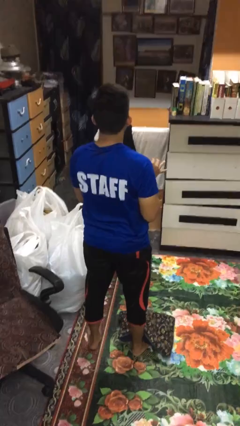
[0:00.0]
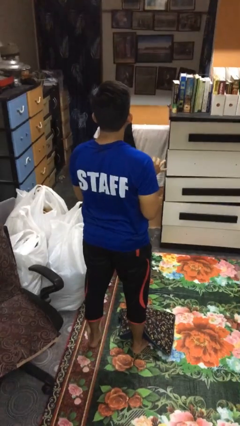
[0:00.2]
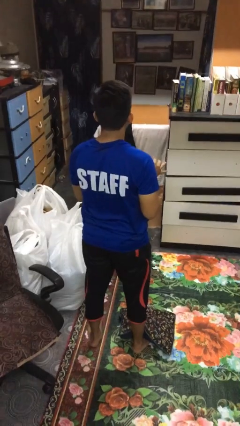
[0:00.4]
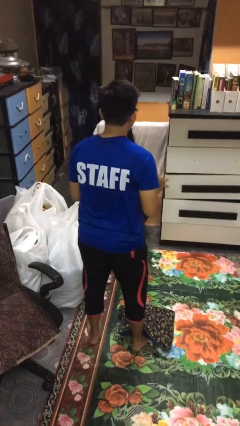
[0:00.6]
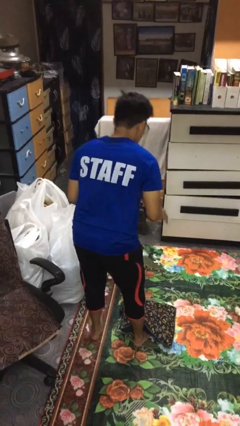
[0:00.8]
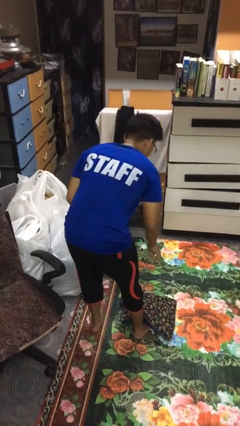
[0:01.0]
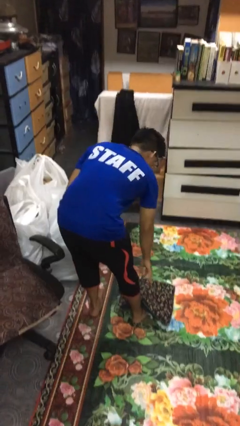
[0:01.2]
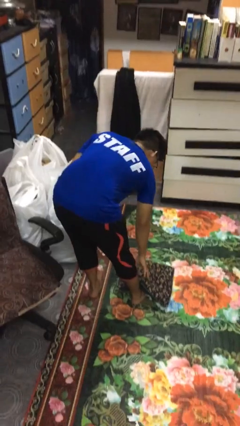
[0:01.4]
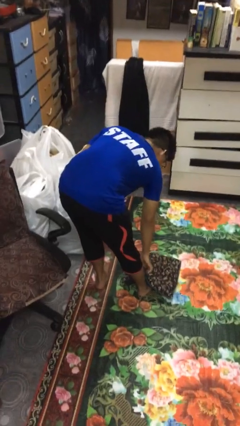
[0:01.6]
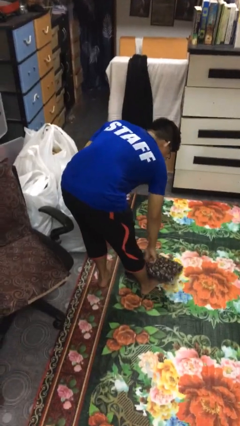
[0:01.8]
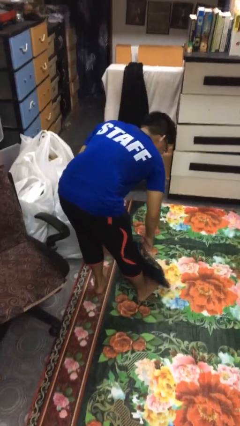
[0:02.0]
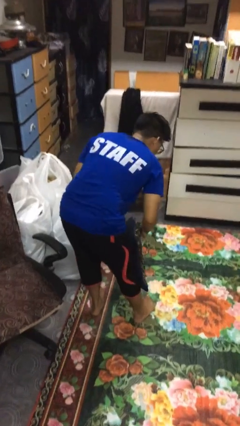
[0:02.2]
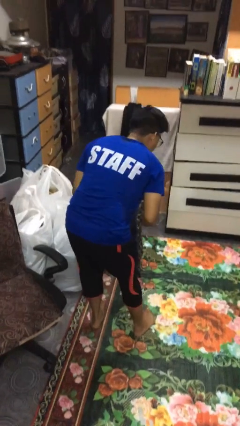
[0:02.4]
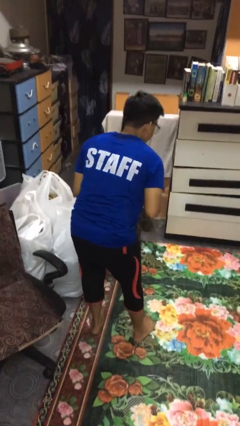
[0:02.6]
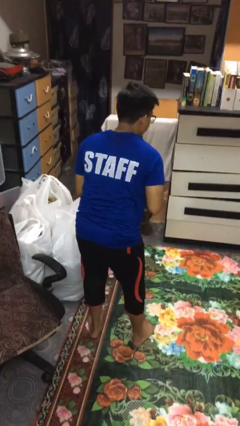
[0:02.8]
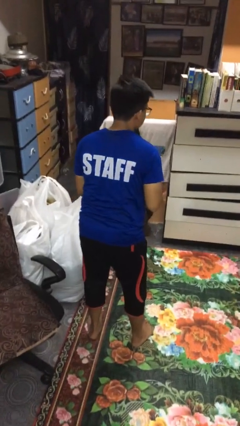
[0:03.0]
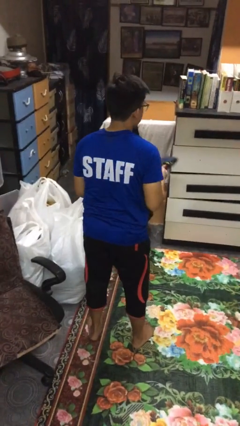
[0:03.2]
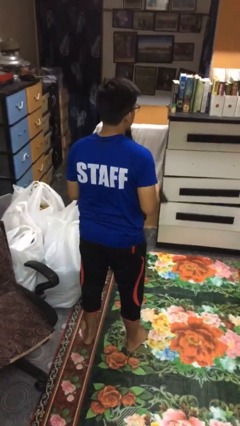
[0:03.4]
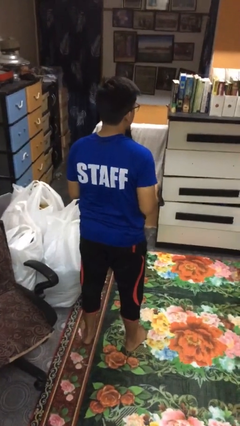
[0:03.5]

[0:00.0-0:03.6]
person picks up object from floor

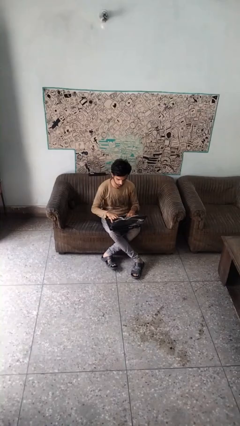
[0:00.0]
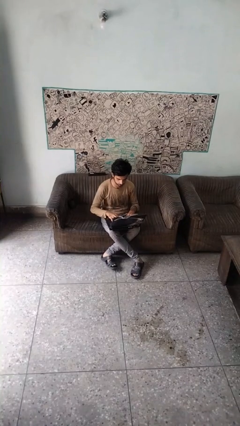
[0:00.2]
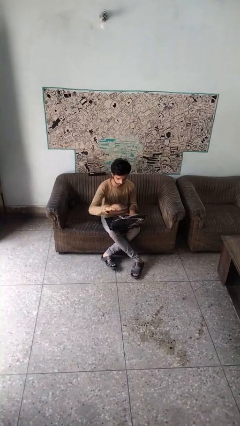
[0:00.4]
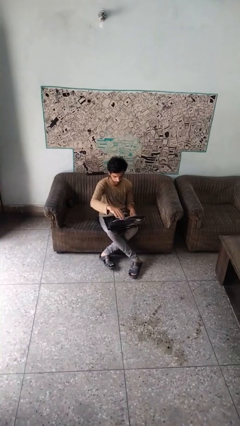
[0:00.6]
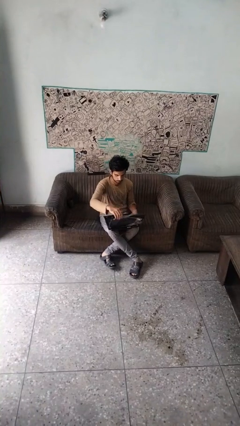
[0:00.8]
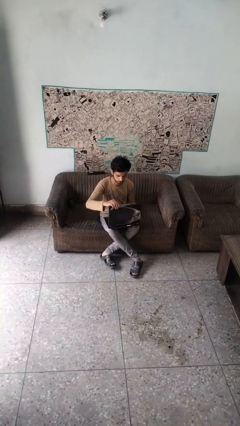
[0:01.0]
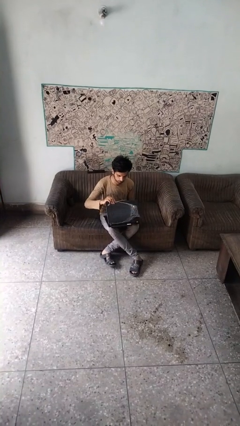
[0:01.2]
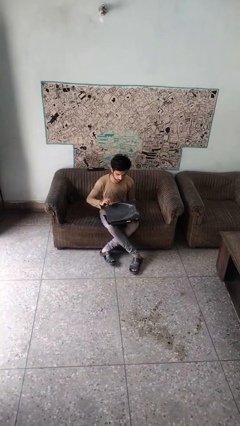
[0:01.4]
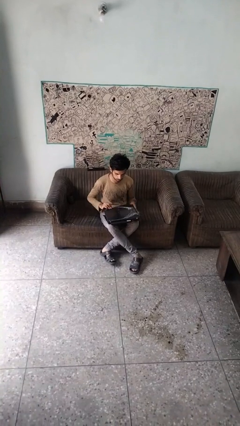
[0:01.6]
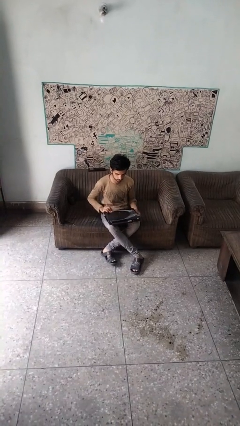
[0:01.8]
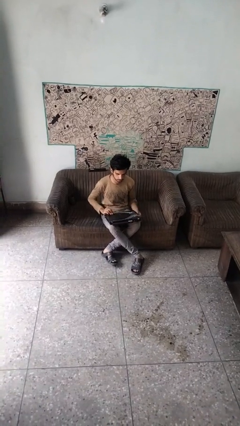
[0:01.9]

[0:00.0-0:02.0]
person closes laptop

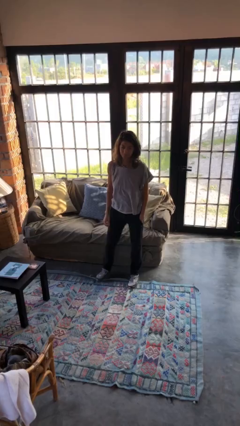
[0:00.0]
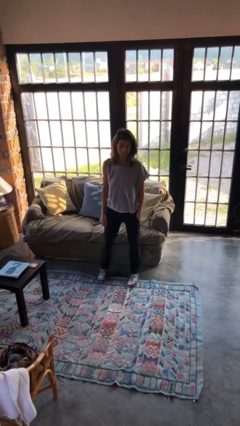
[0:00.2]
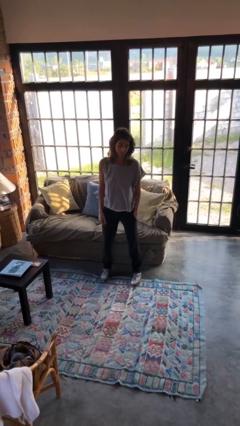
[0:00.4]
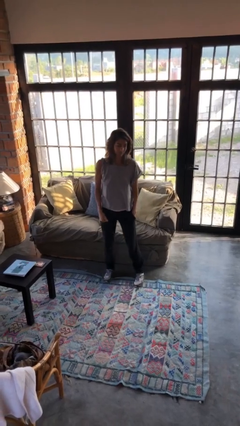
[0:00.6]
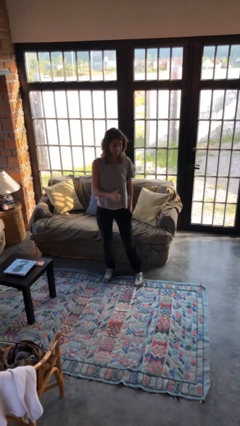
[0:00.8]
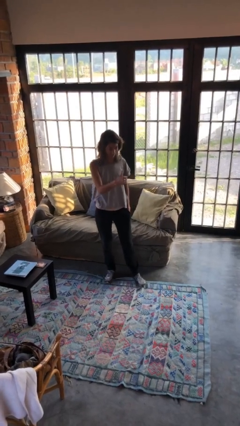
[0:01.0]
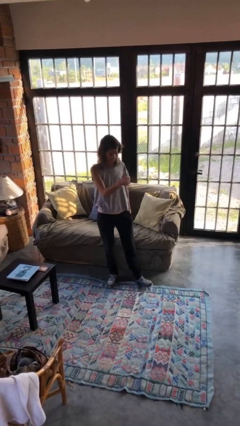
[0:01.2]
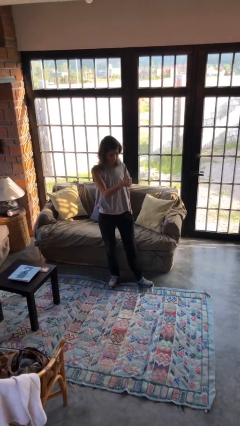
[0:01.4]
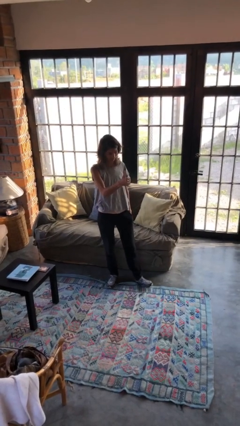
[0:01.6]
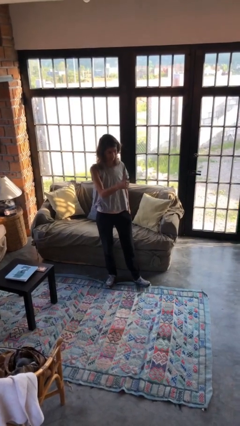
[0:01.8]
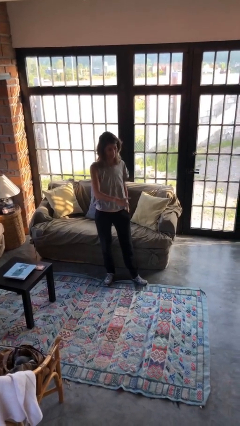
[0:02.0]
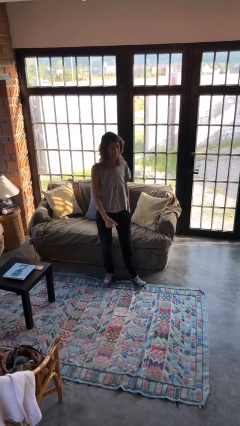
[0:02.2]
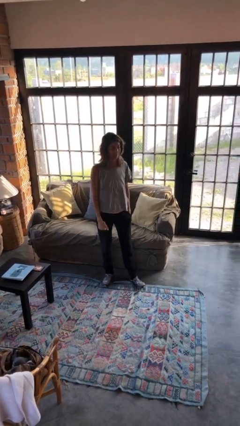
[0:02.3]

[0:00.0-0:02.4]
person gestures thumbs up

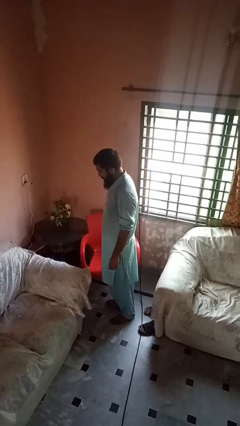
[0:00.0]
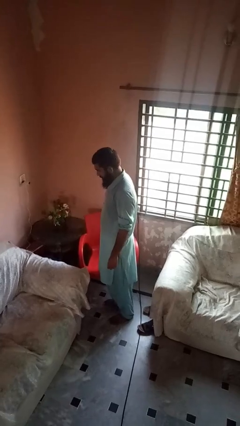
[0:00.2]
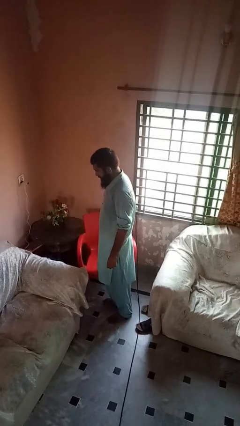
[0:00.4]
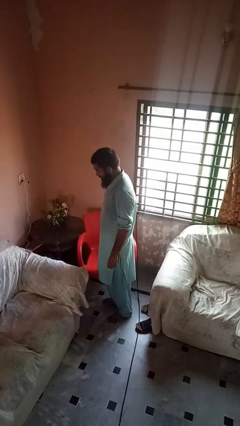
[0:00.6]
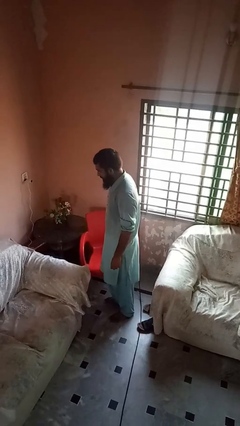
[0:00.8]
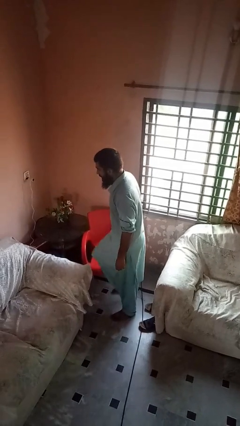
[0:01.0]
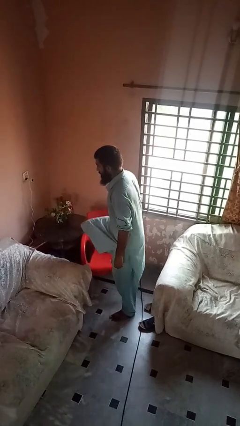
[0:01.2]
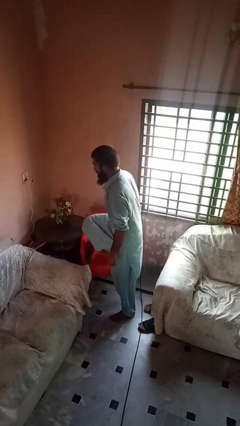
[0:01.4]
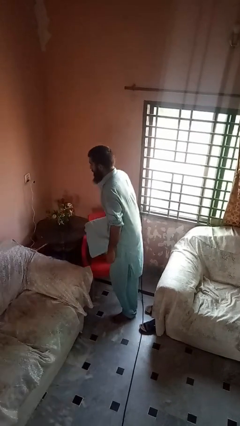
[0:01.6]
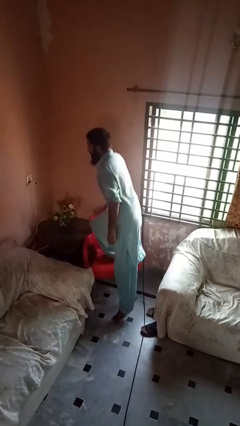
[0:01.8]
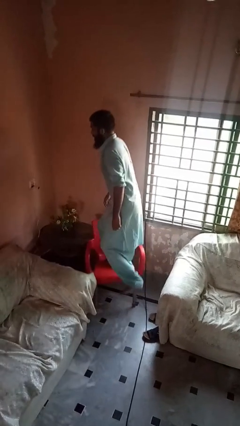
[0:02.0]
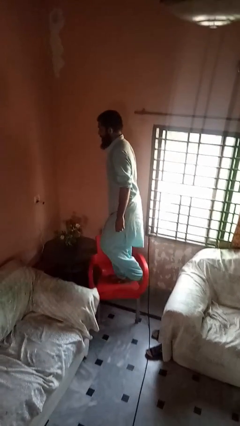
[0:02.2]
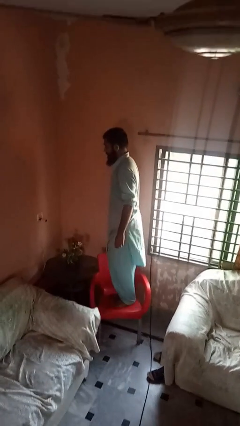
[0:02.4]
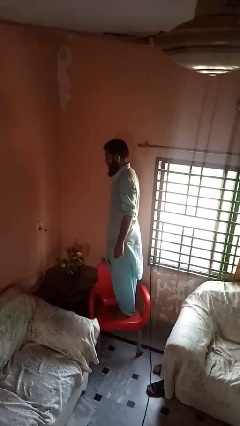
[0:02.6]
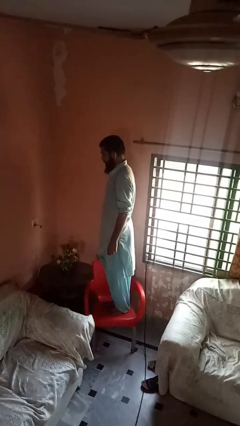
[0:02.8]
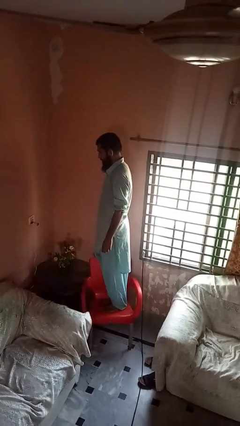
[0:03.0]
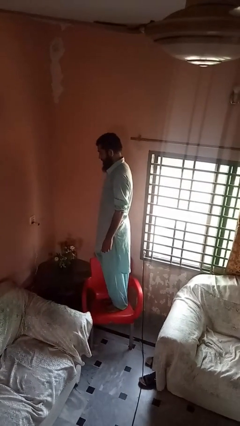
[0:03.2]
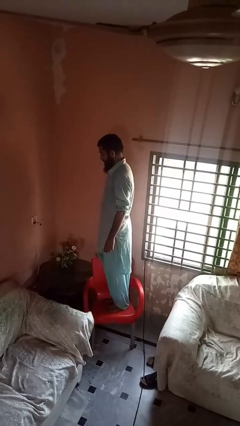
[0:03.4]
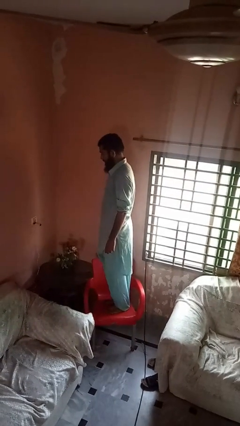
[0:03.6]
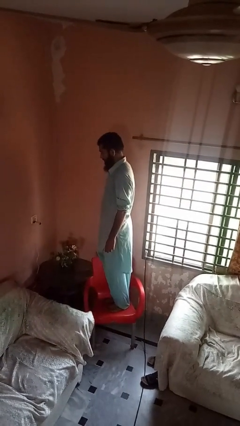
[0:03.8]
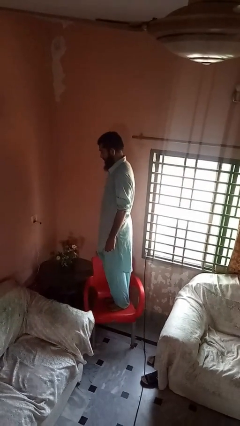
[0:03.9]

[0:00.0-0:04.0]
person climbs on chair

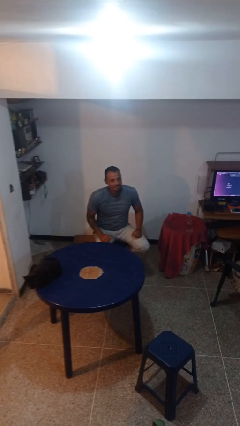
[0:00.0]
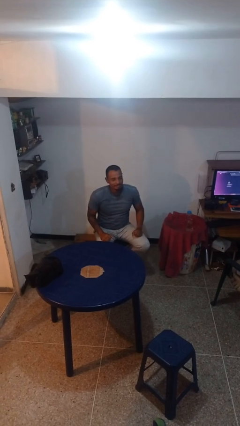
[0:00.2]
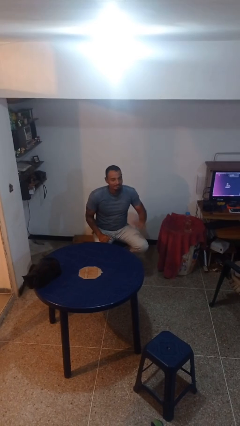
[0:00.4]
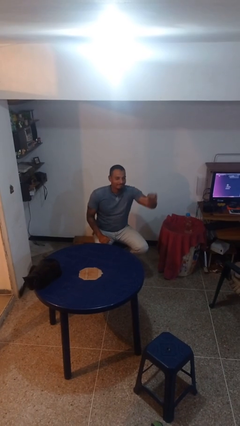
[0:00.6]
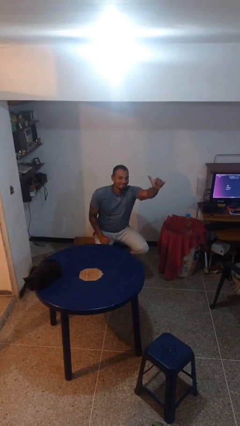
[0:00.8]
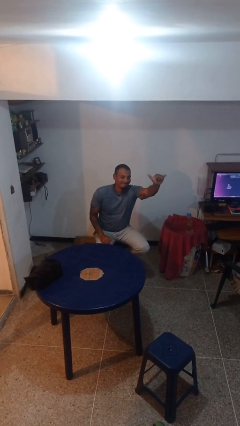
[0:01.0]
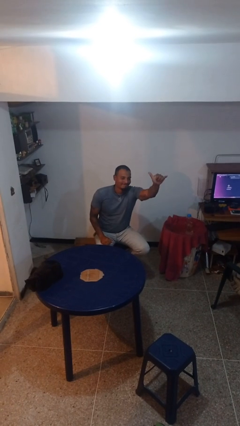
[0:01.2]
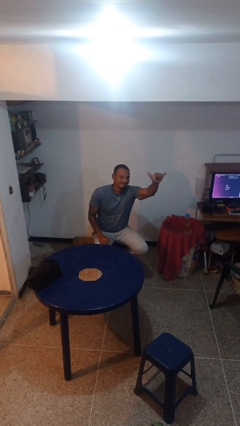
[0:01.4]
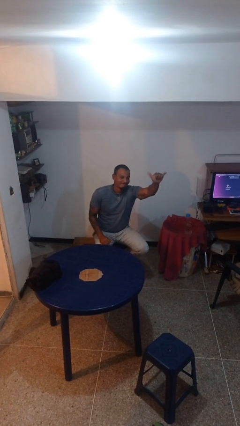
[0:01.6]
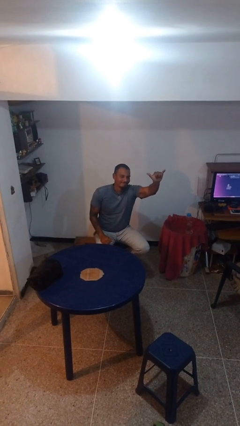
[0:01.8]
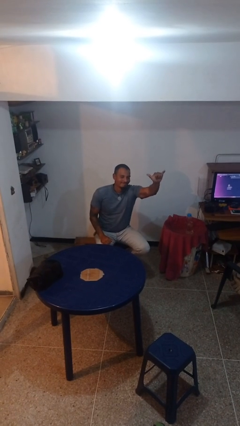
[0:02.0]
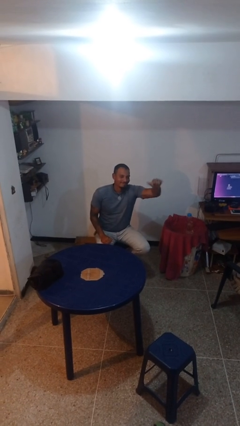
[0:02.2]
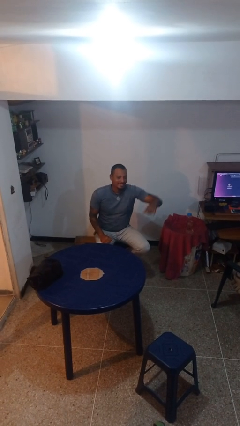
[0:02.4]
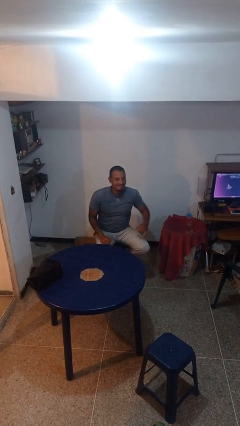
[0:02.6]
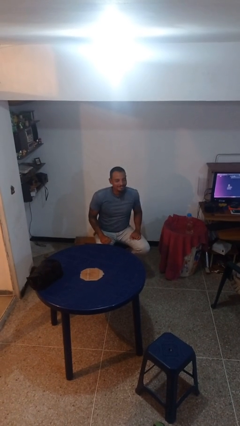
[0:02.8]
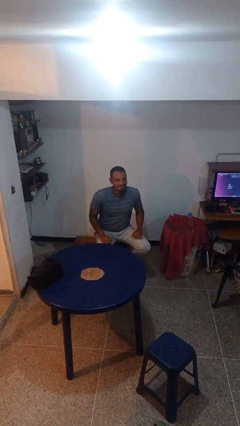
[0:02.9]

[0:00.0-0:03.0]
person gestures hang loose

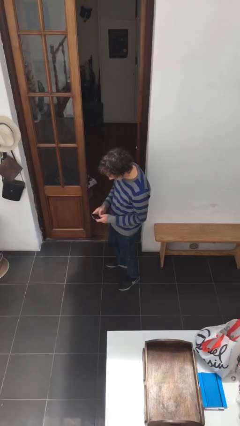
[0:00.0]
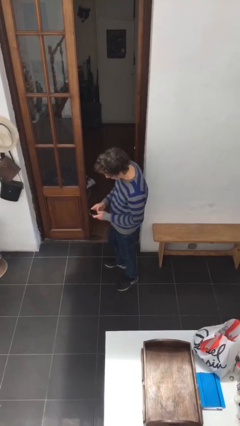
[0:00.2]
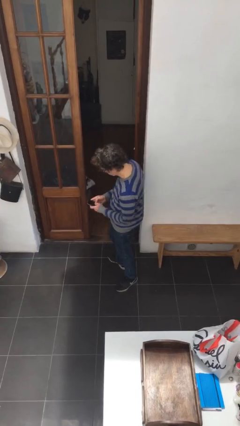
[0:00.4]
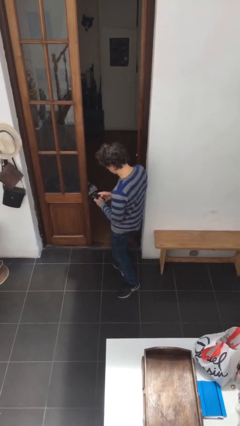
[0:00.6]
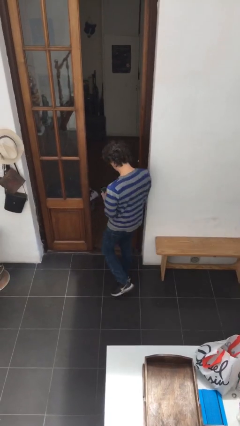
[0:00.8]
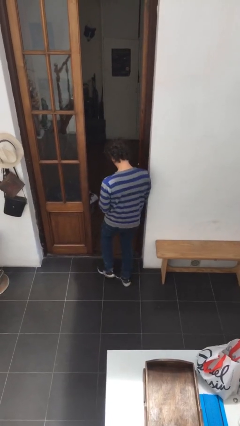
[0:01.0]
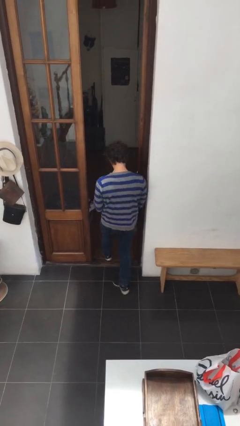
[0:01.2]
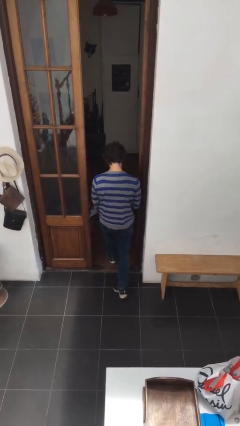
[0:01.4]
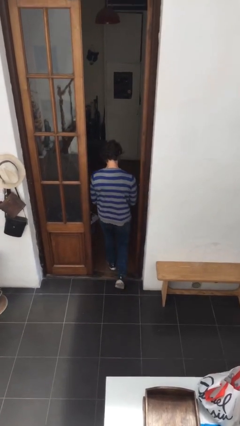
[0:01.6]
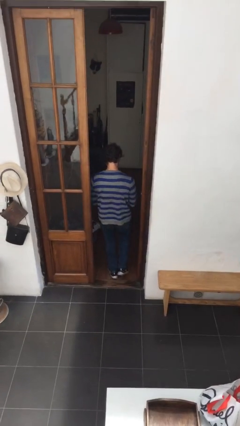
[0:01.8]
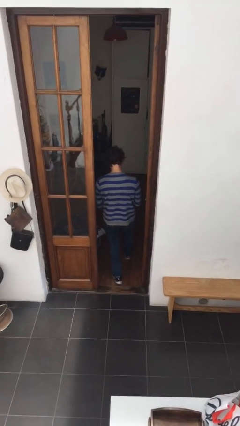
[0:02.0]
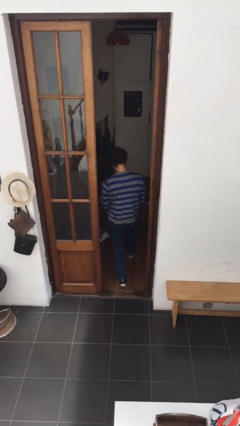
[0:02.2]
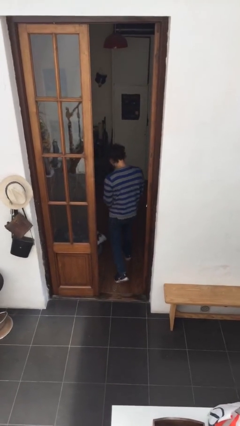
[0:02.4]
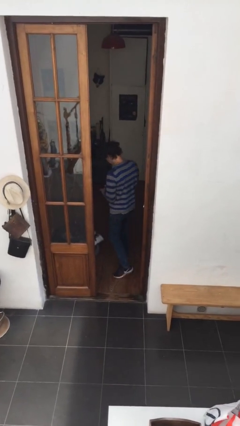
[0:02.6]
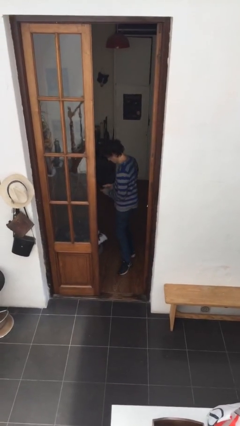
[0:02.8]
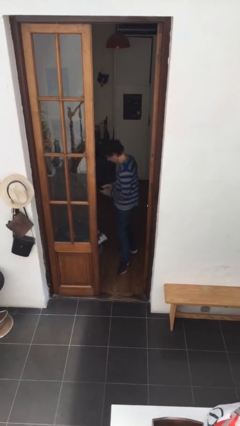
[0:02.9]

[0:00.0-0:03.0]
person exits scene through structure
